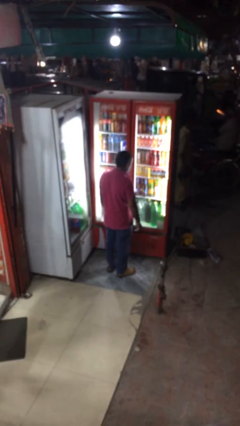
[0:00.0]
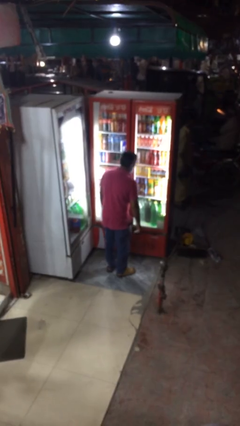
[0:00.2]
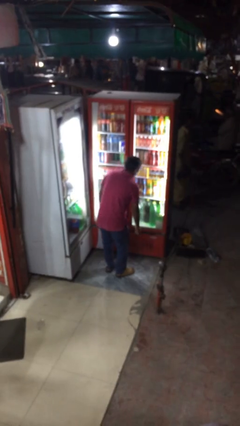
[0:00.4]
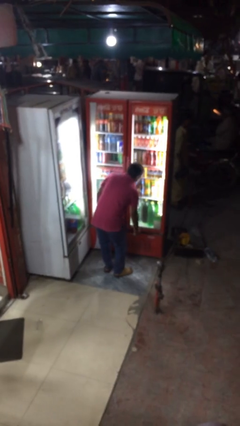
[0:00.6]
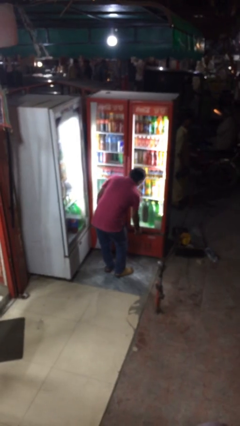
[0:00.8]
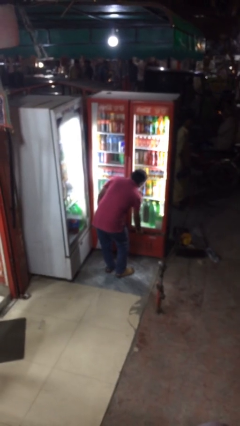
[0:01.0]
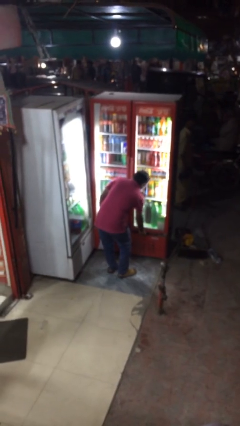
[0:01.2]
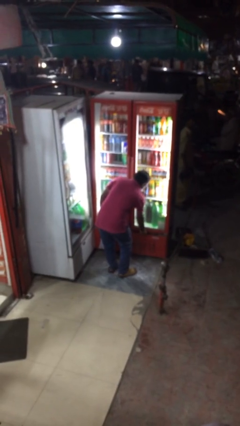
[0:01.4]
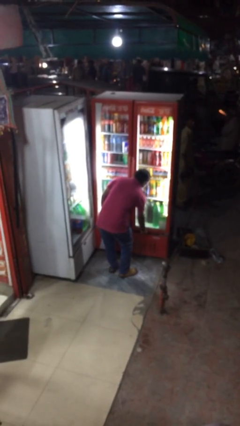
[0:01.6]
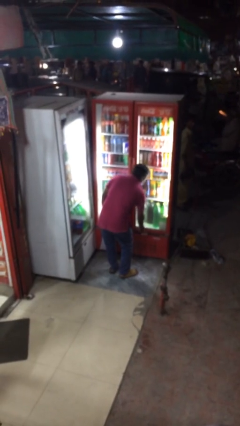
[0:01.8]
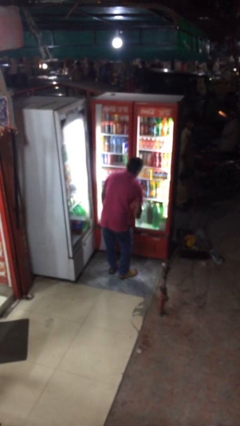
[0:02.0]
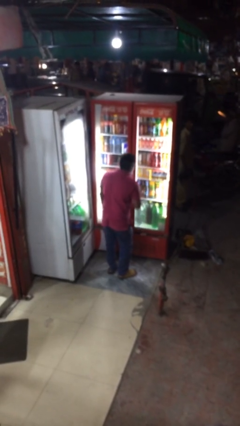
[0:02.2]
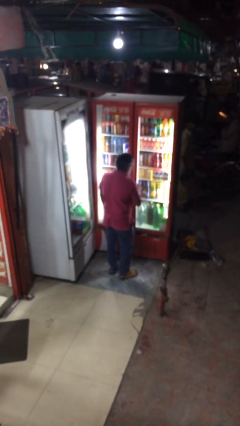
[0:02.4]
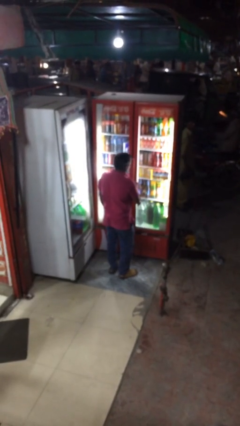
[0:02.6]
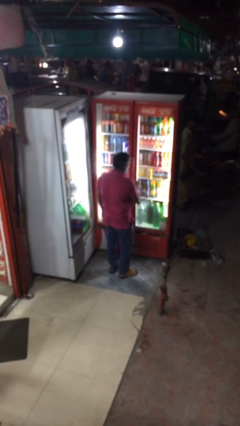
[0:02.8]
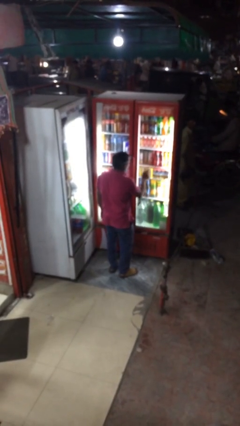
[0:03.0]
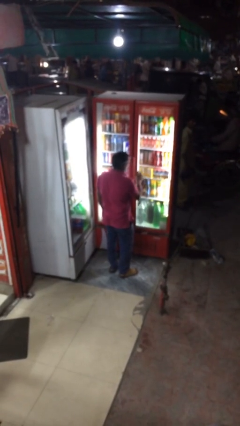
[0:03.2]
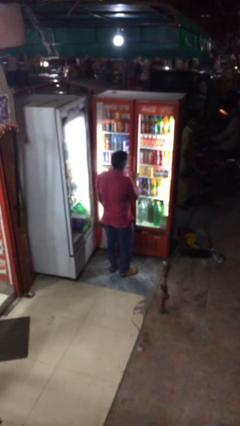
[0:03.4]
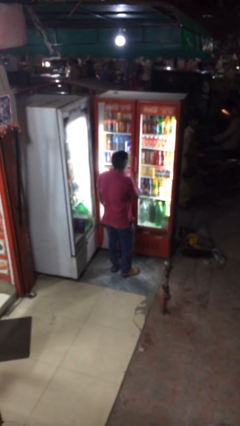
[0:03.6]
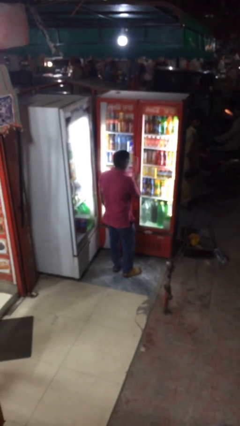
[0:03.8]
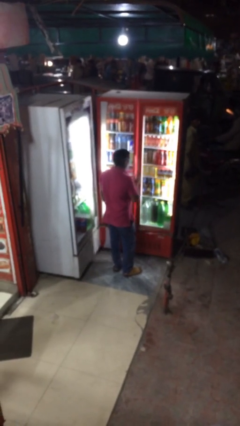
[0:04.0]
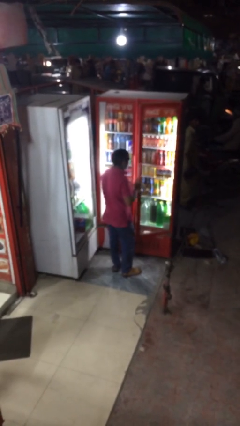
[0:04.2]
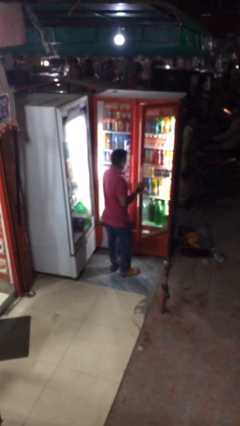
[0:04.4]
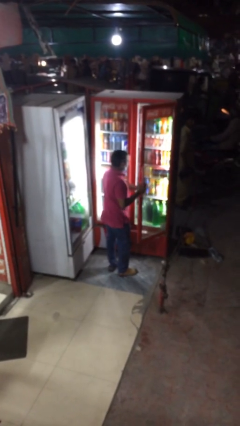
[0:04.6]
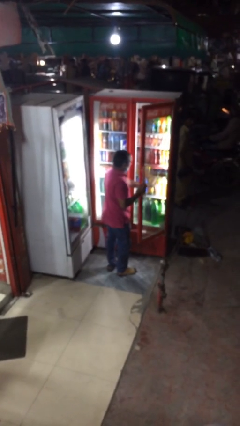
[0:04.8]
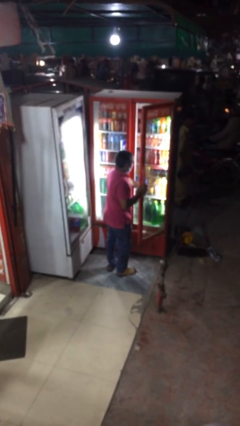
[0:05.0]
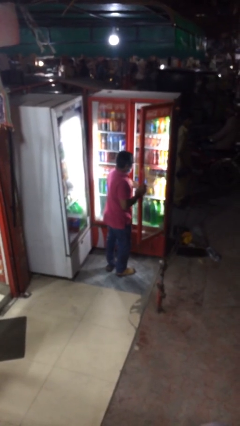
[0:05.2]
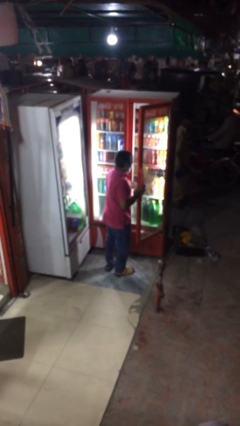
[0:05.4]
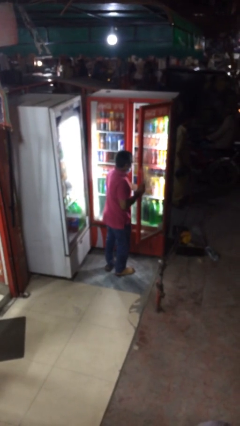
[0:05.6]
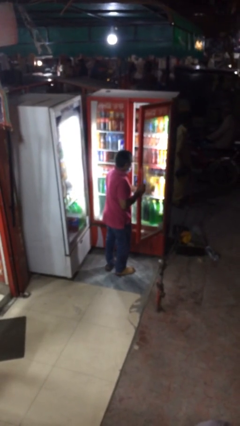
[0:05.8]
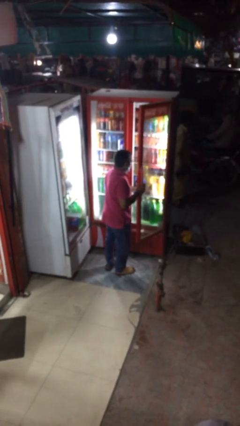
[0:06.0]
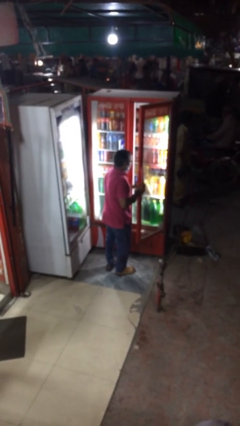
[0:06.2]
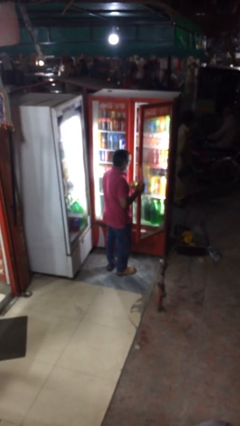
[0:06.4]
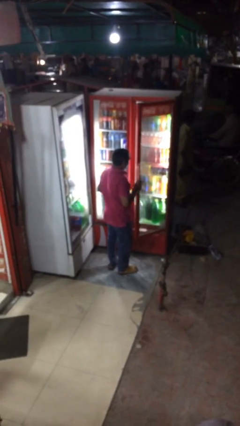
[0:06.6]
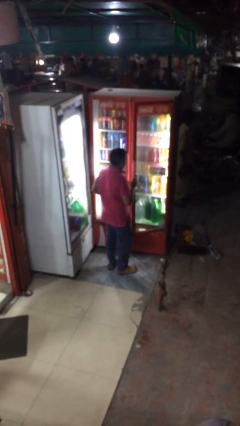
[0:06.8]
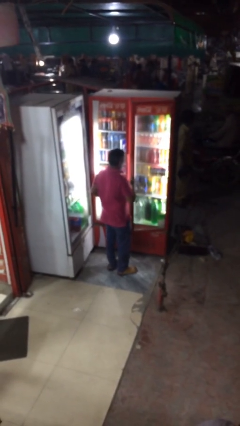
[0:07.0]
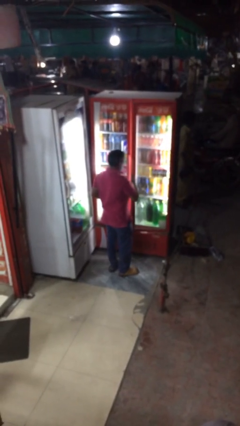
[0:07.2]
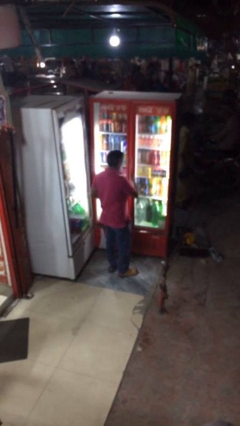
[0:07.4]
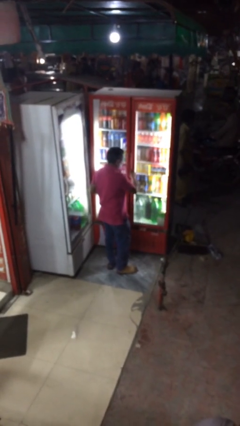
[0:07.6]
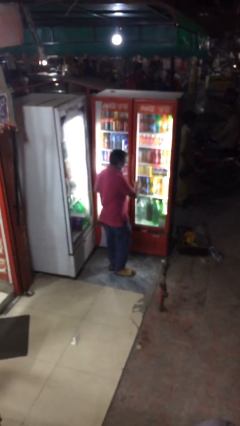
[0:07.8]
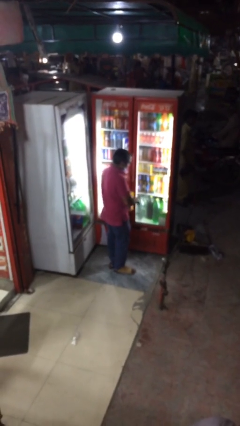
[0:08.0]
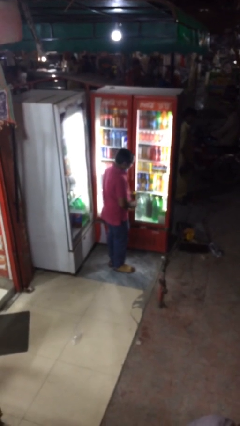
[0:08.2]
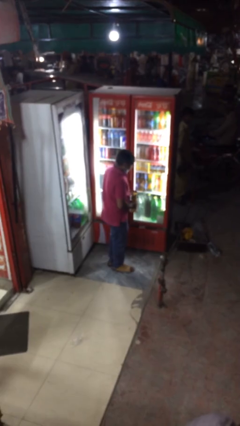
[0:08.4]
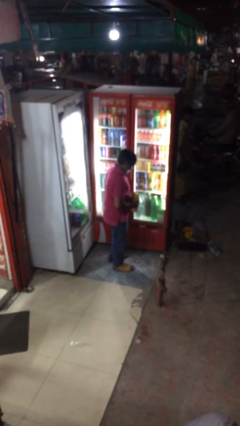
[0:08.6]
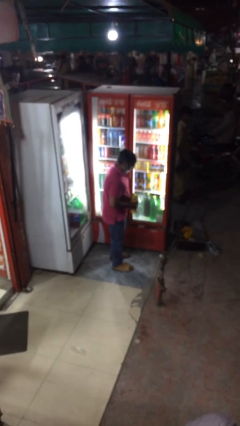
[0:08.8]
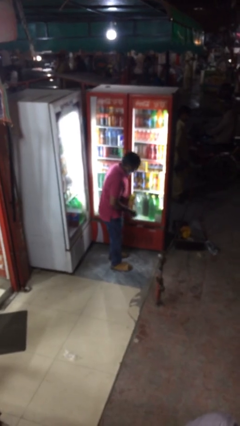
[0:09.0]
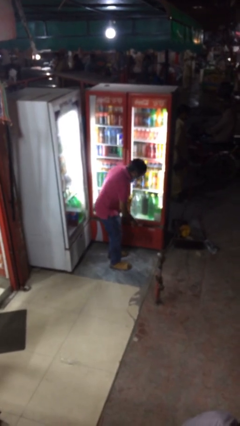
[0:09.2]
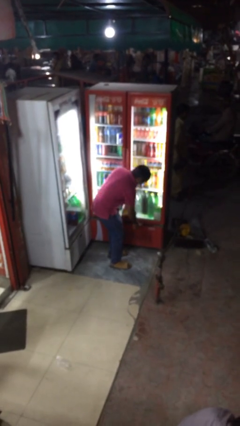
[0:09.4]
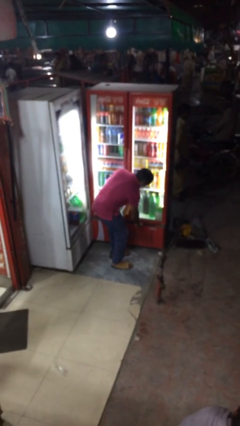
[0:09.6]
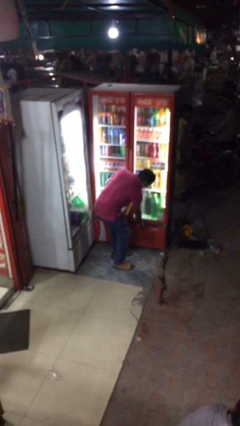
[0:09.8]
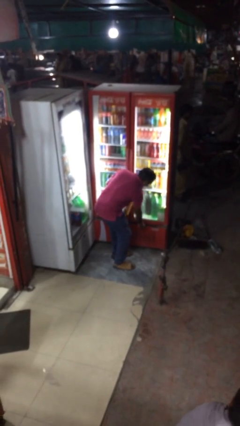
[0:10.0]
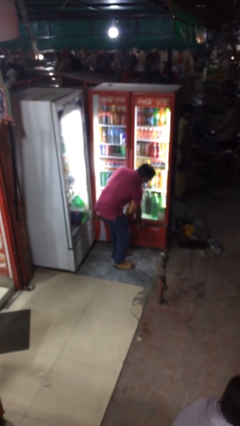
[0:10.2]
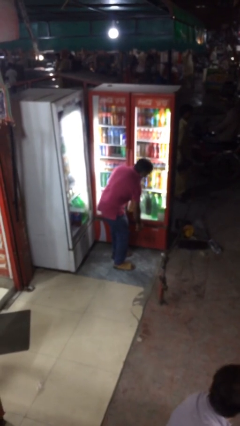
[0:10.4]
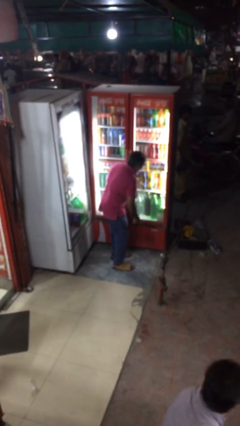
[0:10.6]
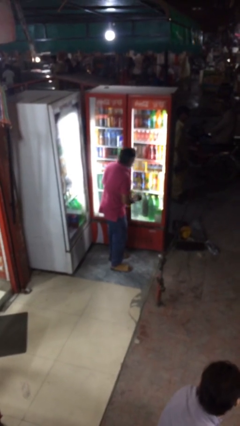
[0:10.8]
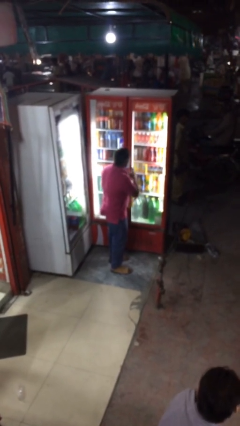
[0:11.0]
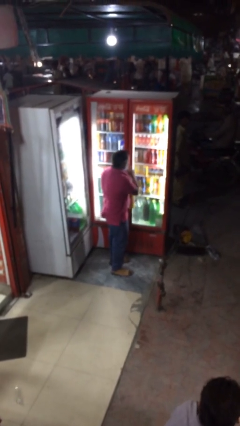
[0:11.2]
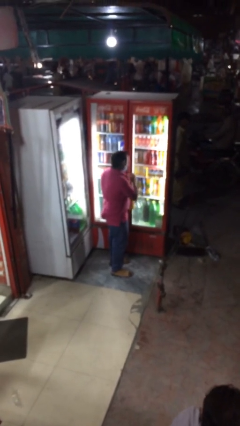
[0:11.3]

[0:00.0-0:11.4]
person purchases from machine

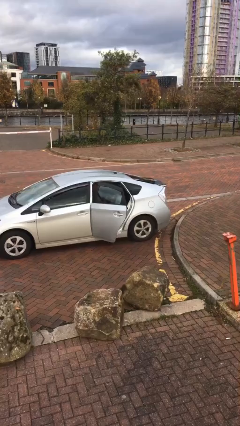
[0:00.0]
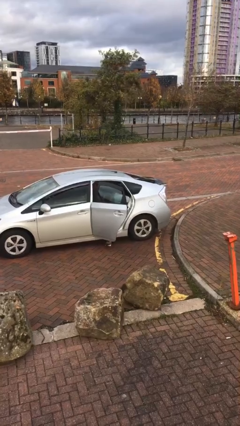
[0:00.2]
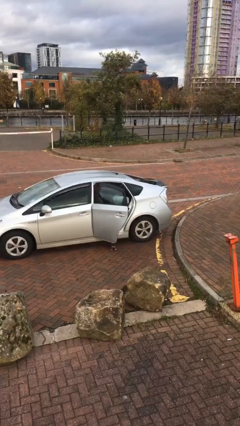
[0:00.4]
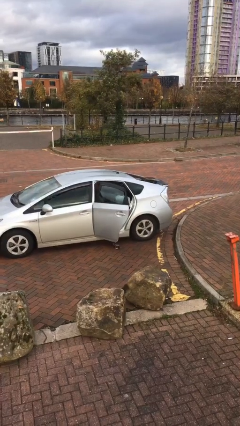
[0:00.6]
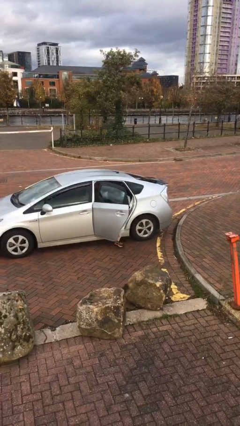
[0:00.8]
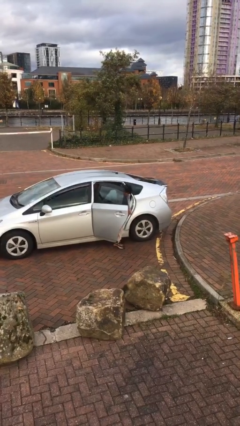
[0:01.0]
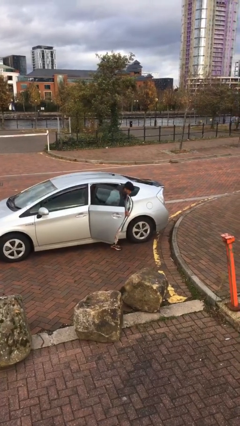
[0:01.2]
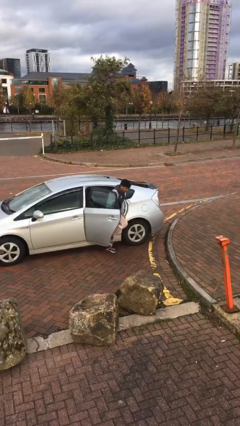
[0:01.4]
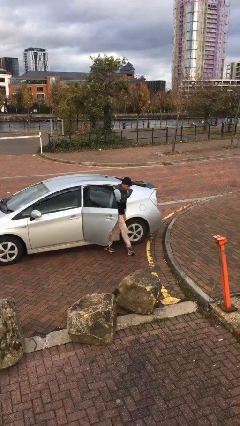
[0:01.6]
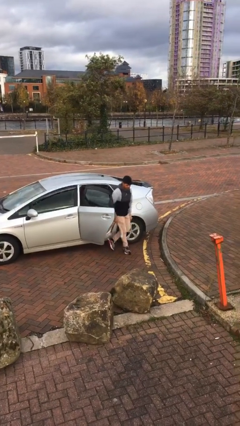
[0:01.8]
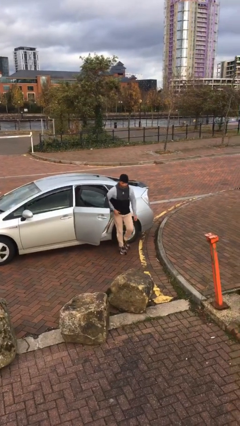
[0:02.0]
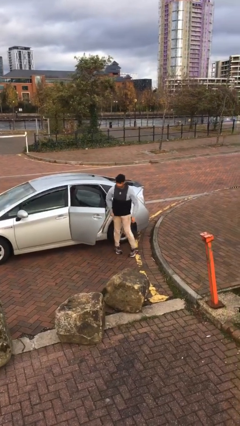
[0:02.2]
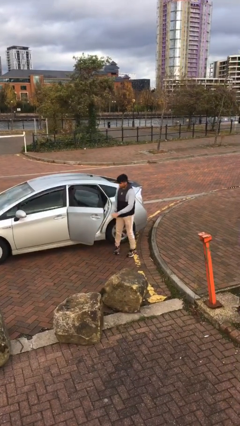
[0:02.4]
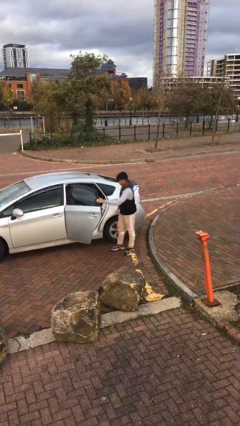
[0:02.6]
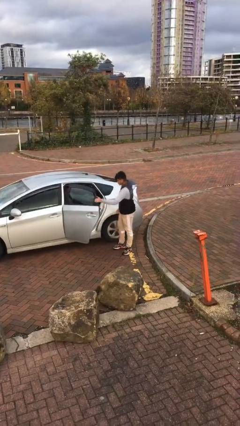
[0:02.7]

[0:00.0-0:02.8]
person exits car

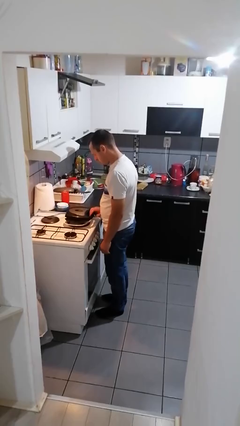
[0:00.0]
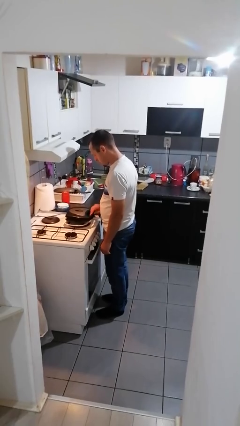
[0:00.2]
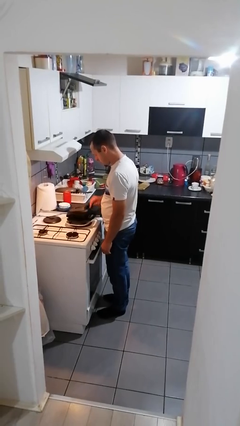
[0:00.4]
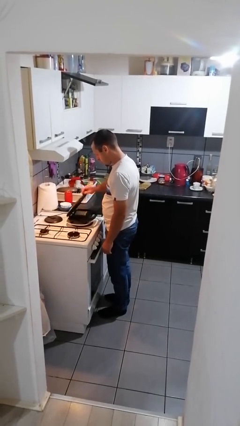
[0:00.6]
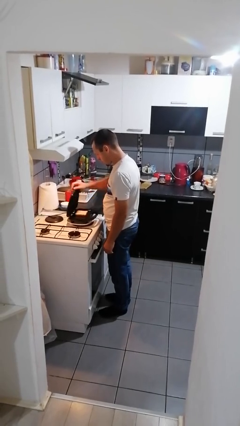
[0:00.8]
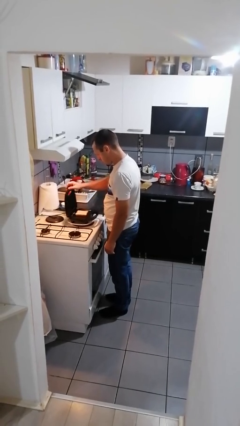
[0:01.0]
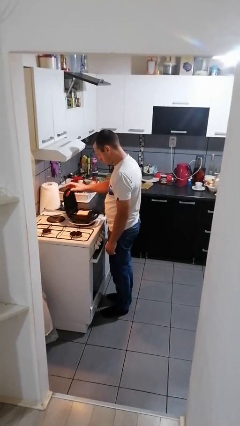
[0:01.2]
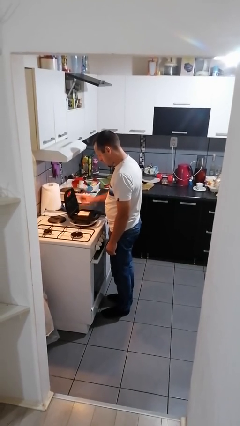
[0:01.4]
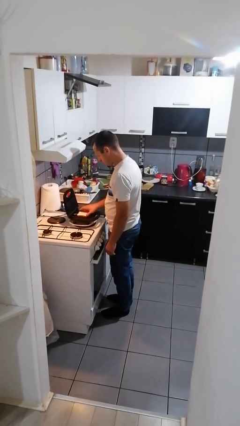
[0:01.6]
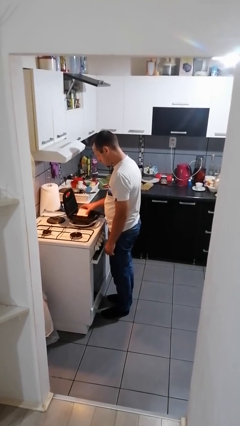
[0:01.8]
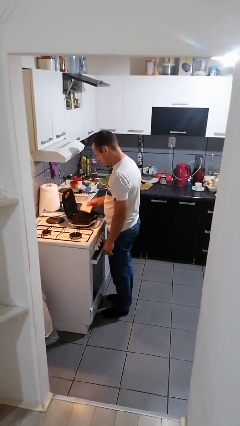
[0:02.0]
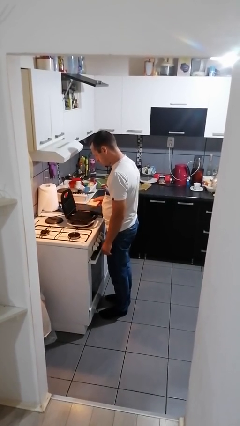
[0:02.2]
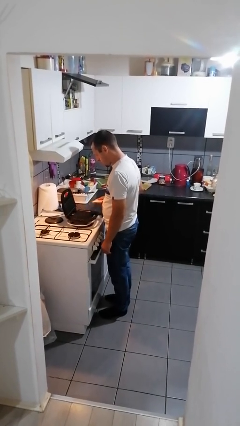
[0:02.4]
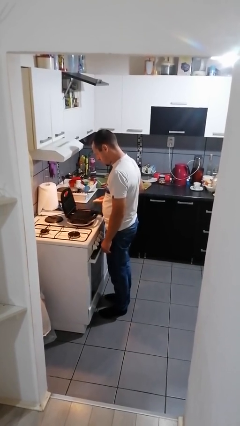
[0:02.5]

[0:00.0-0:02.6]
person takes object from toaster

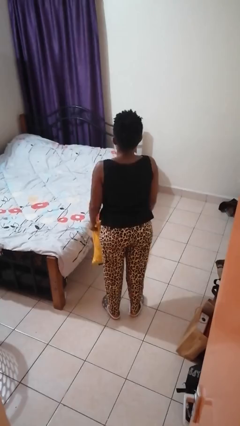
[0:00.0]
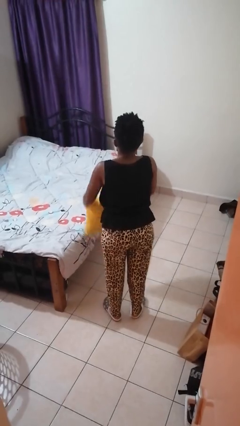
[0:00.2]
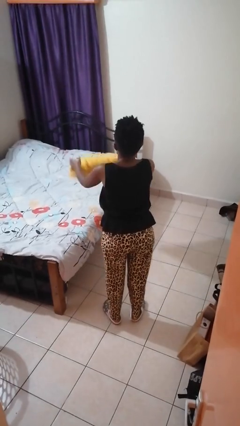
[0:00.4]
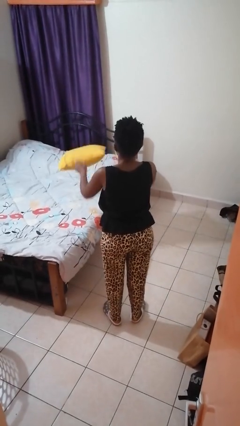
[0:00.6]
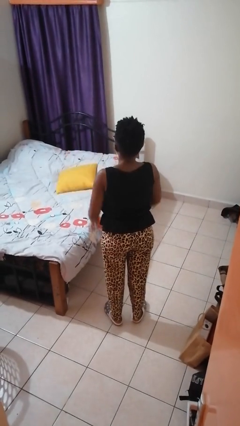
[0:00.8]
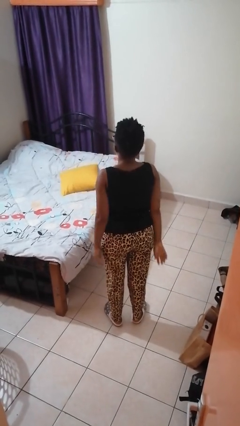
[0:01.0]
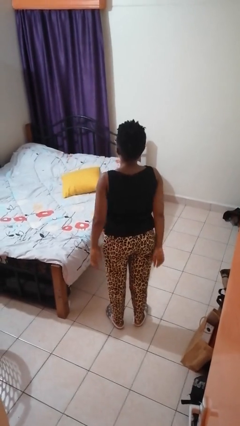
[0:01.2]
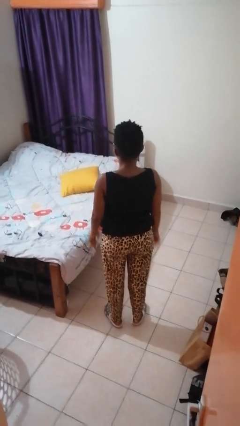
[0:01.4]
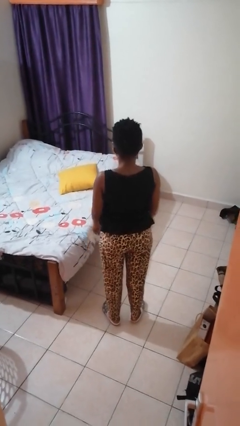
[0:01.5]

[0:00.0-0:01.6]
person throws object on bed
